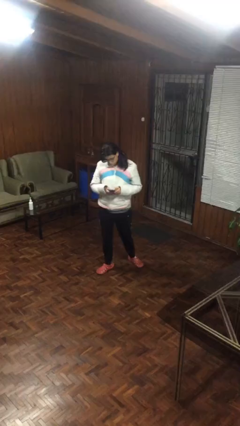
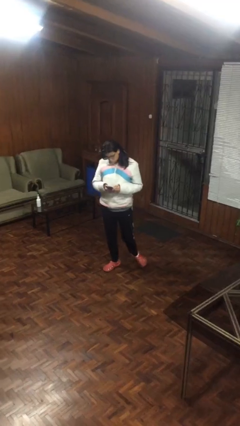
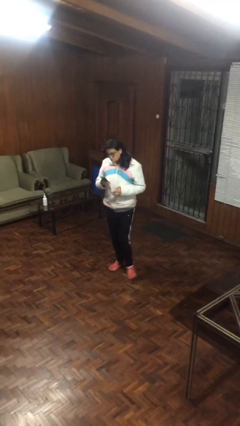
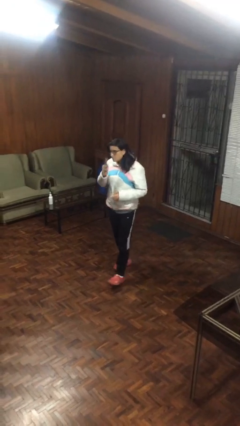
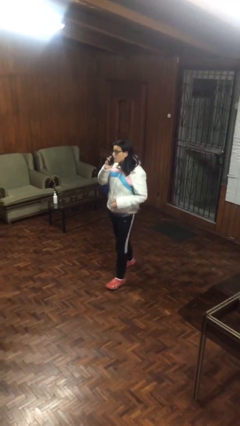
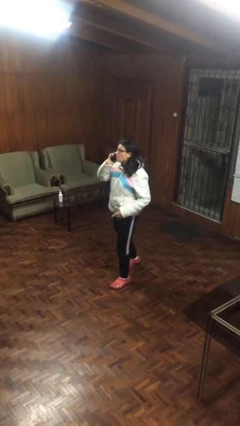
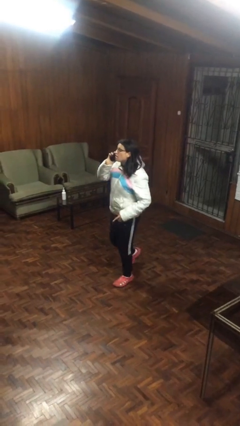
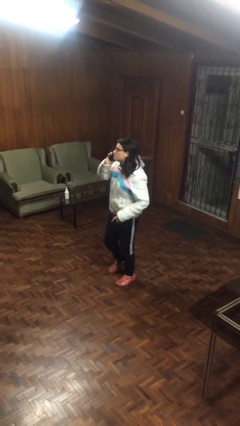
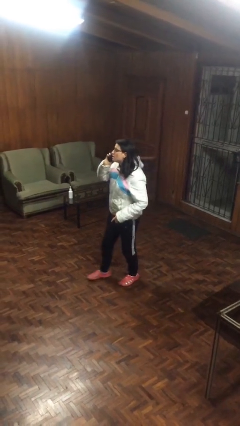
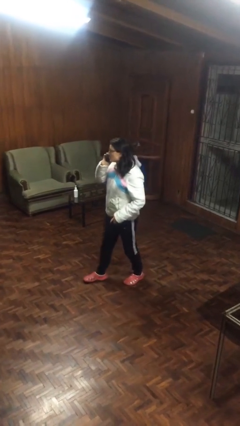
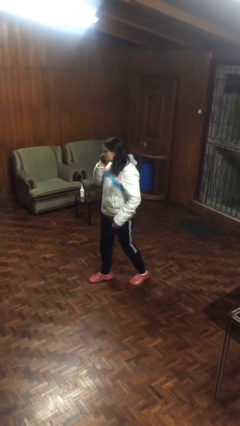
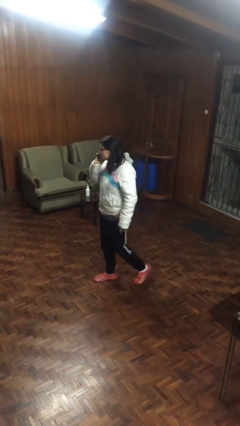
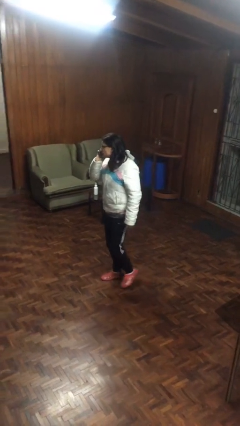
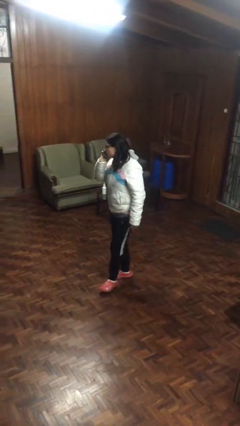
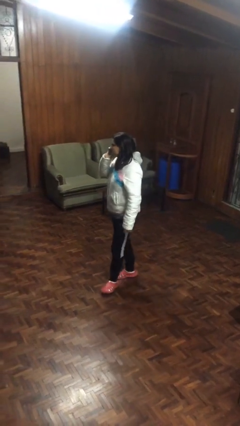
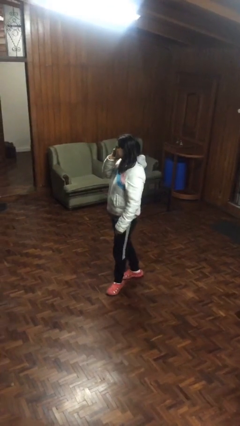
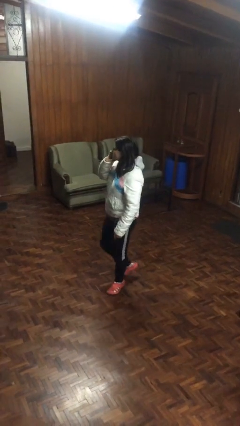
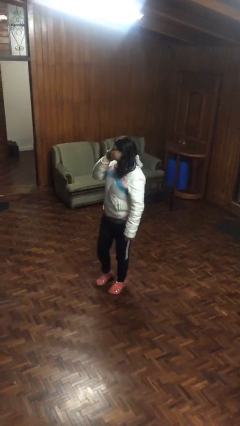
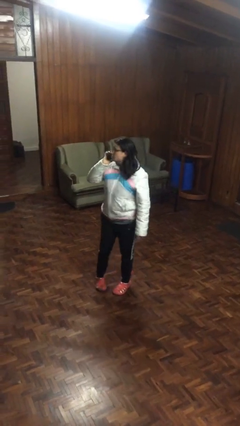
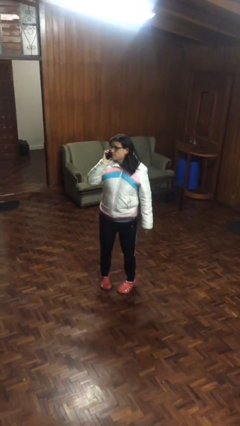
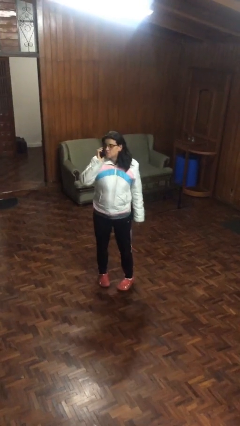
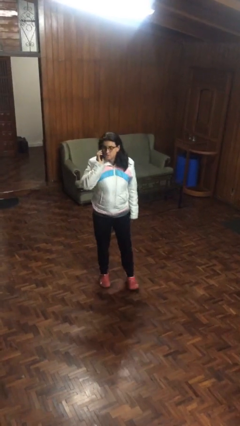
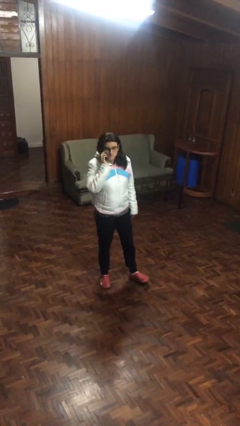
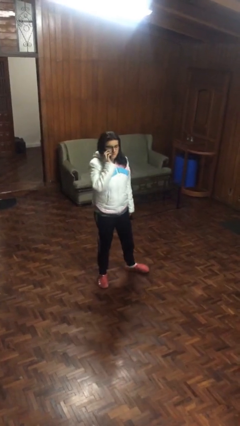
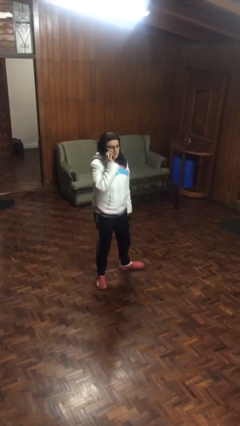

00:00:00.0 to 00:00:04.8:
person talks on phone

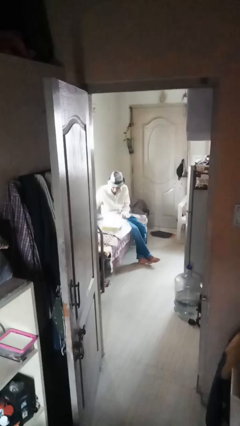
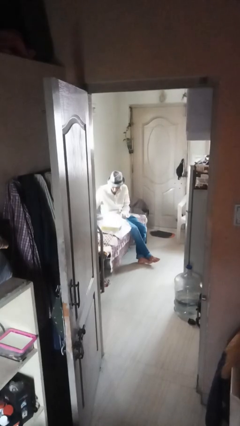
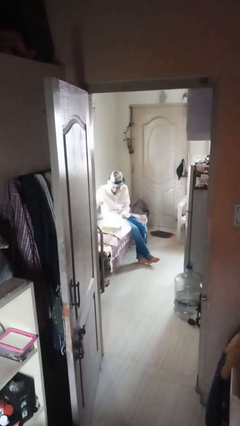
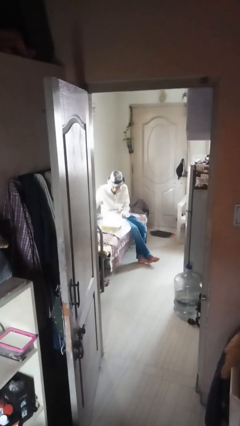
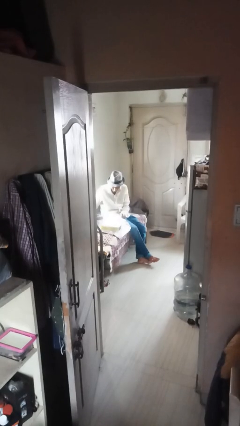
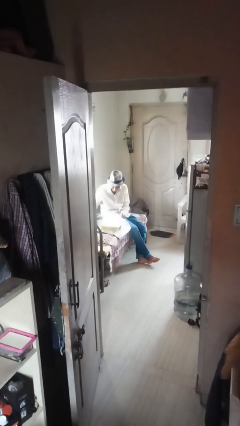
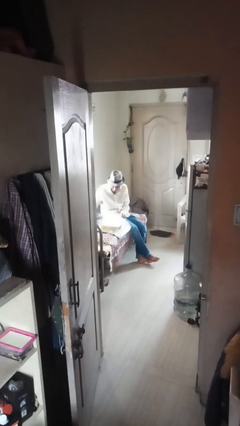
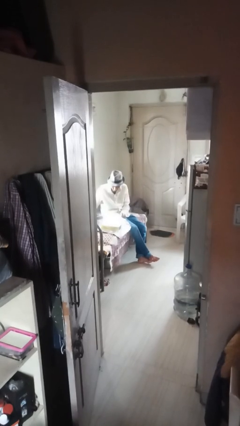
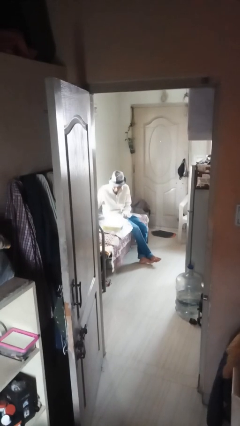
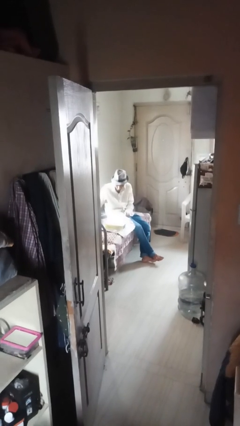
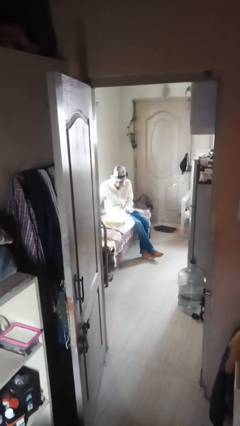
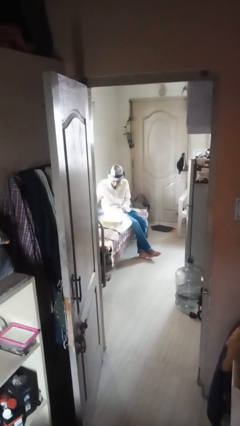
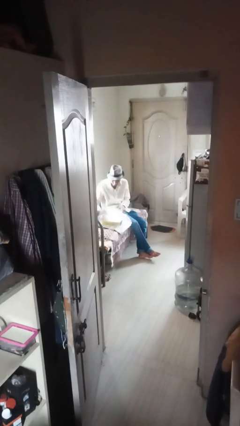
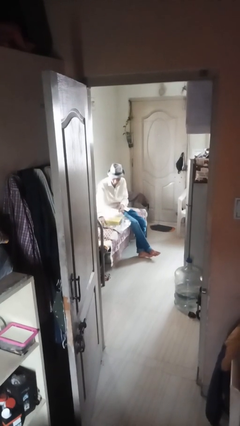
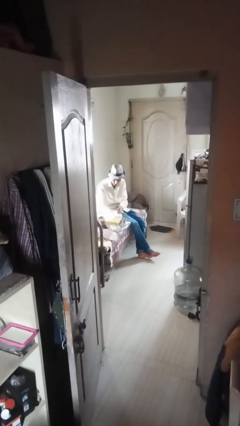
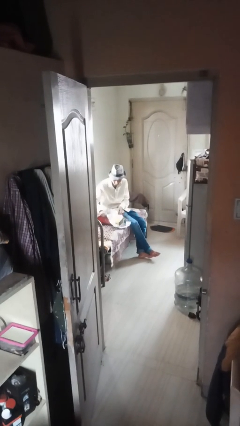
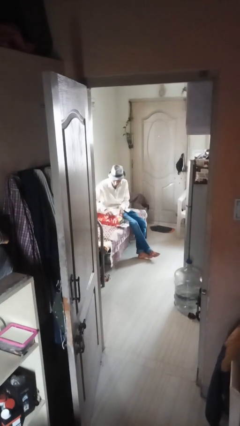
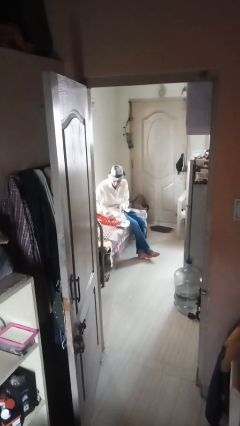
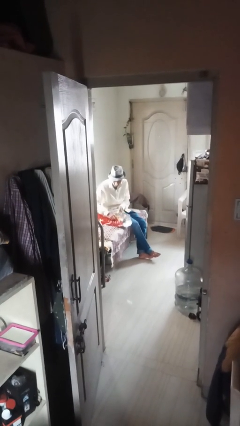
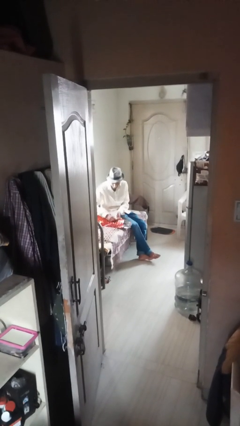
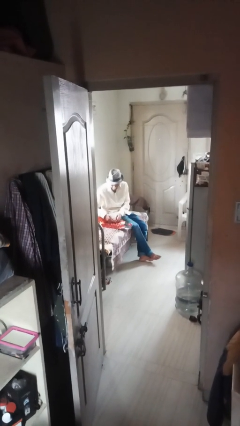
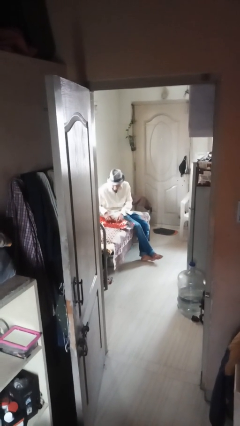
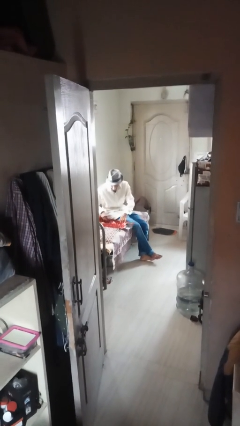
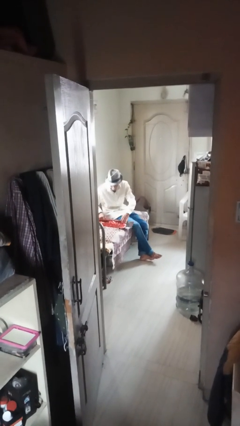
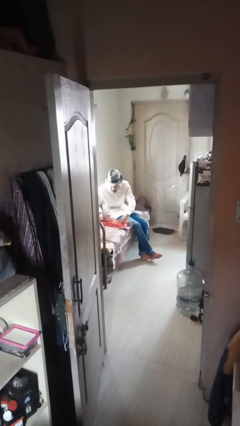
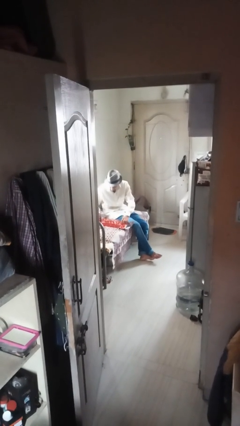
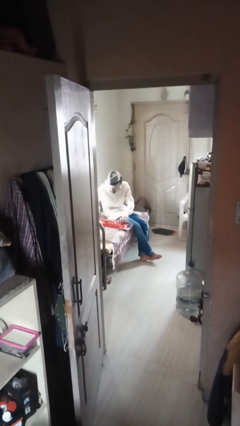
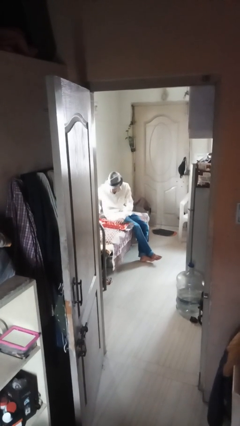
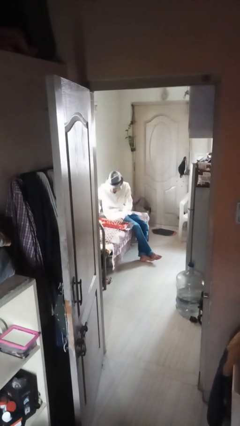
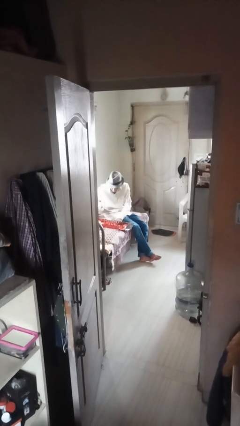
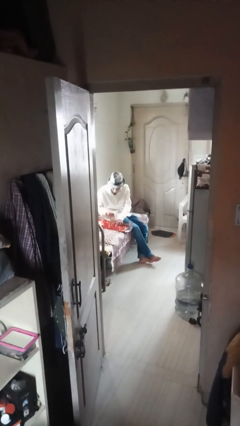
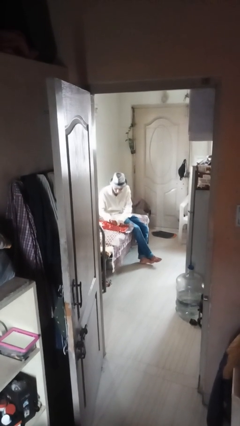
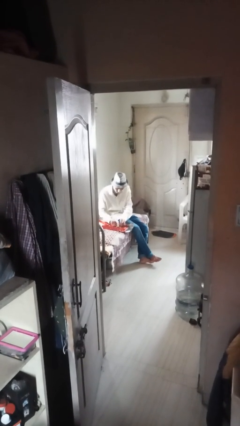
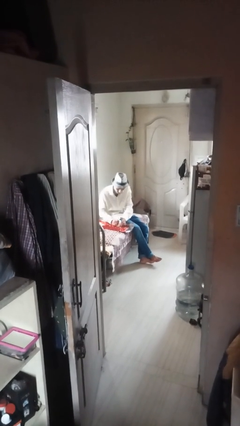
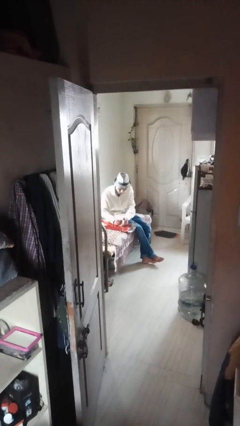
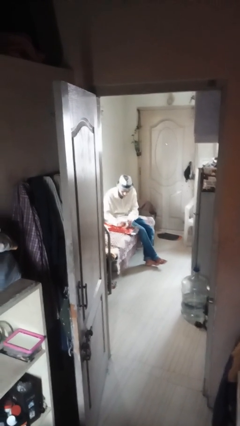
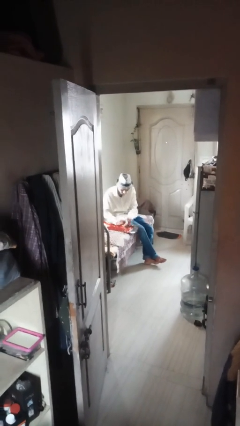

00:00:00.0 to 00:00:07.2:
person wraps box

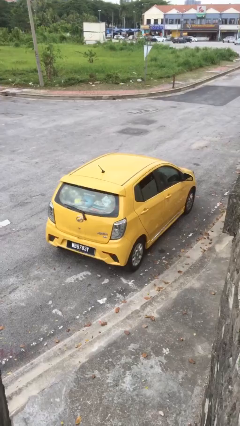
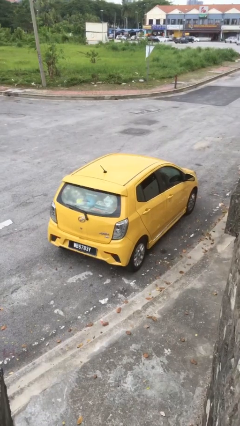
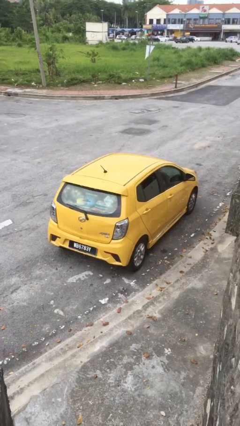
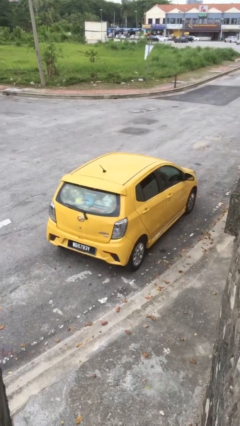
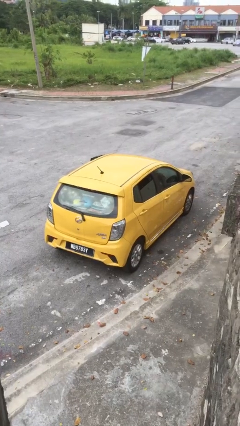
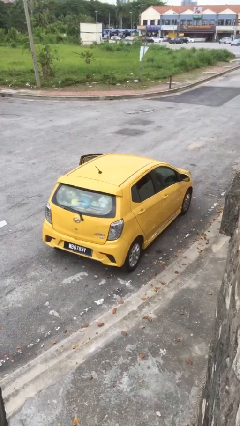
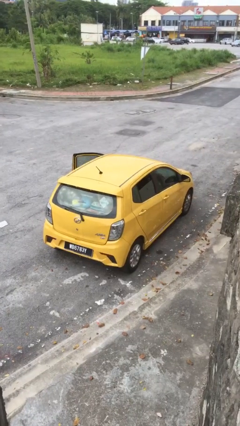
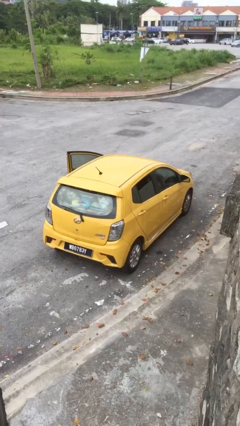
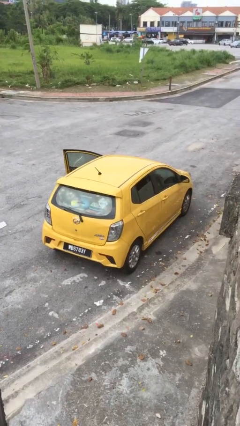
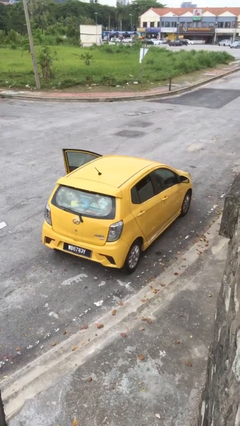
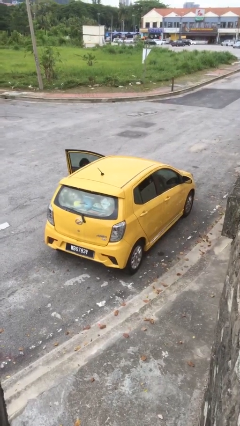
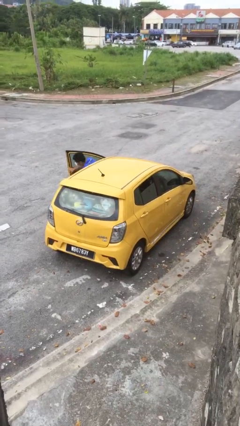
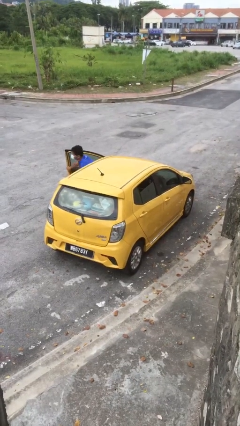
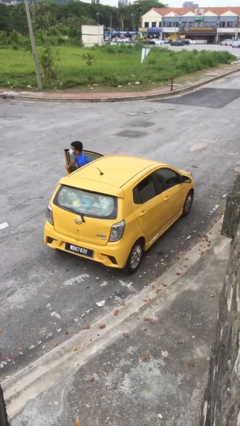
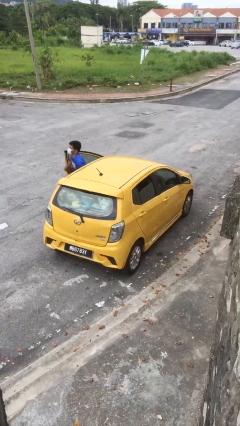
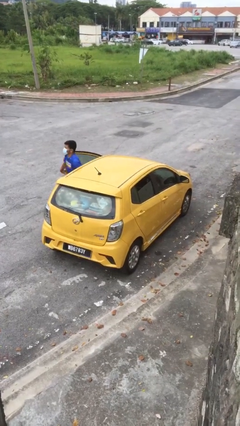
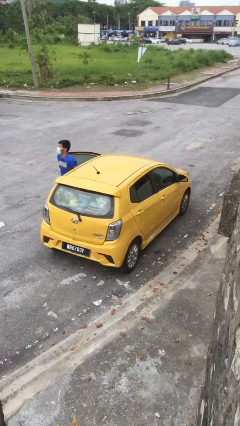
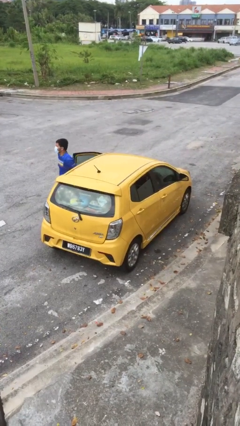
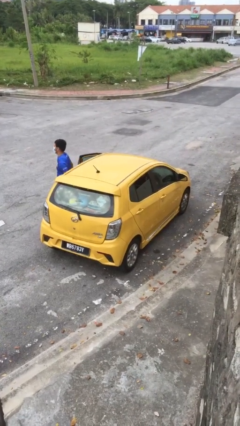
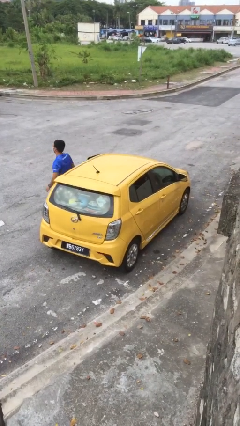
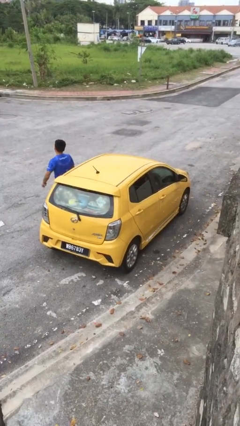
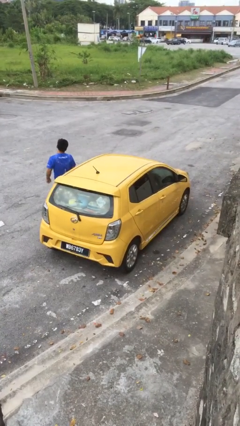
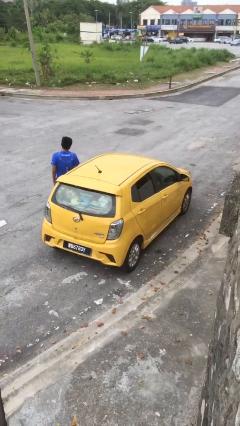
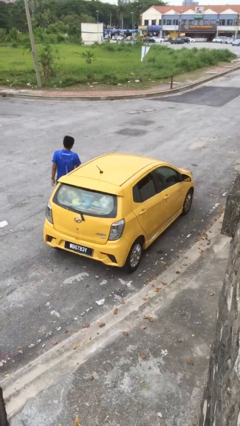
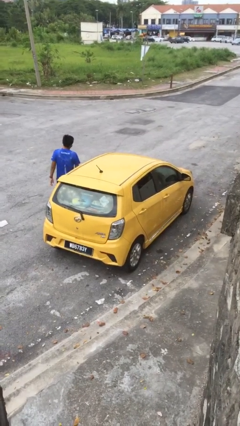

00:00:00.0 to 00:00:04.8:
car drops off person

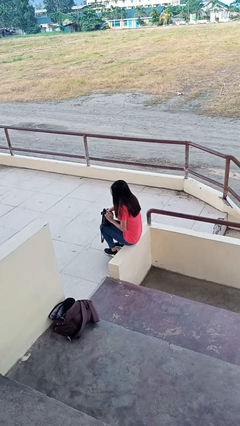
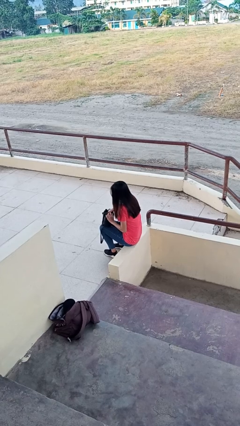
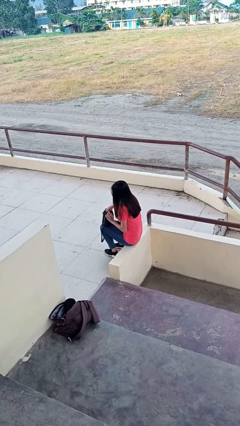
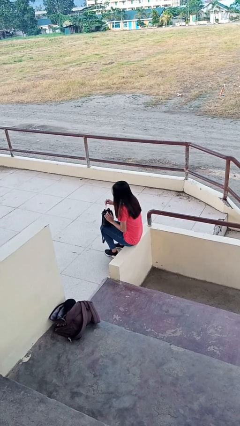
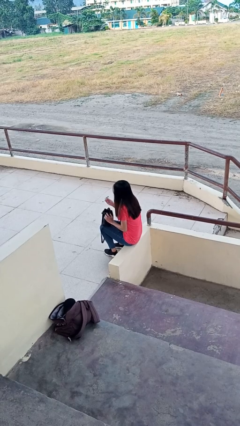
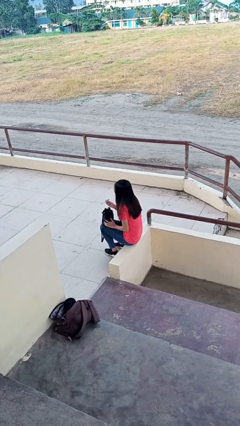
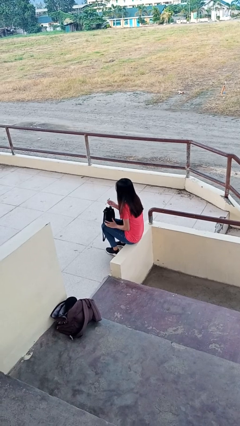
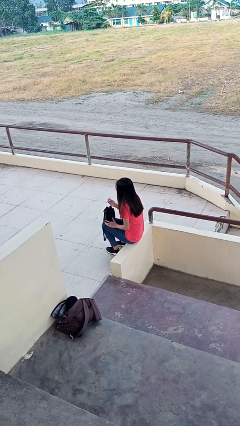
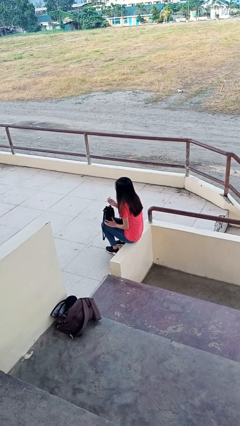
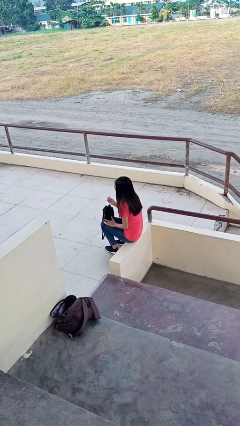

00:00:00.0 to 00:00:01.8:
person takes object from purse
